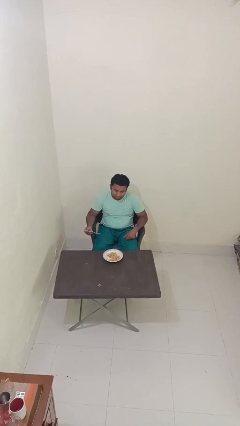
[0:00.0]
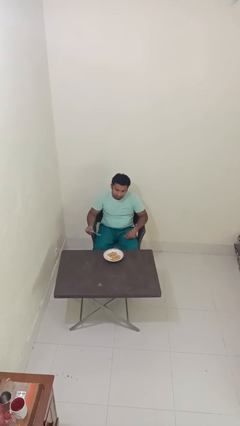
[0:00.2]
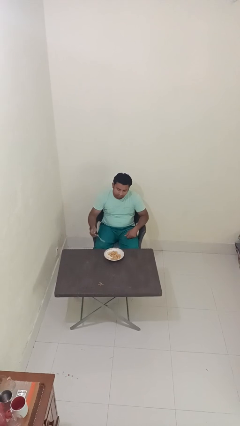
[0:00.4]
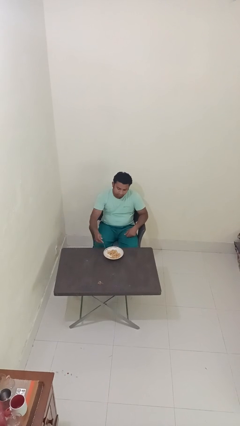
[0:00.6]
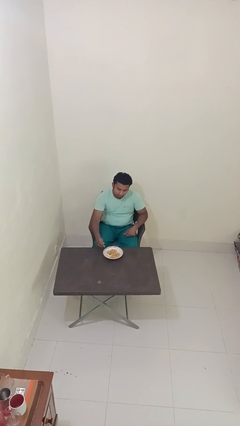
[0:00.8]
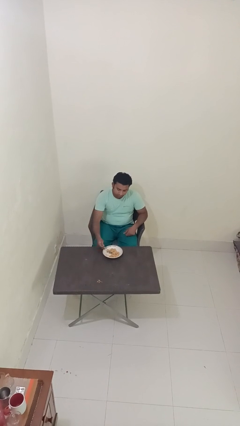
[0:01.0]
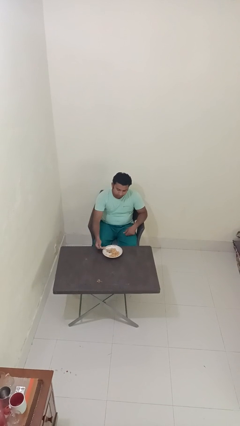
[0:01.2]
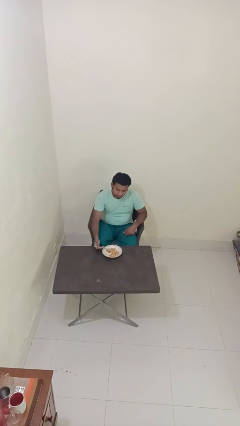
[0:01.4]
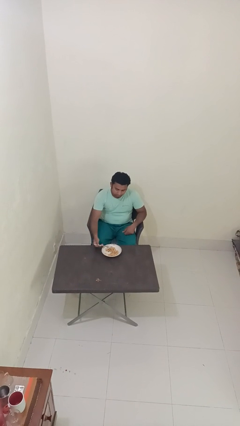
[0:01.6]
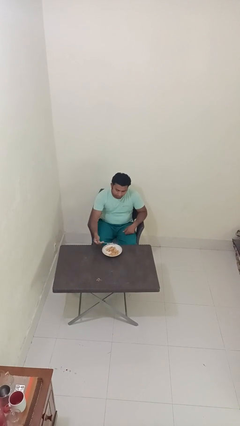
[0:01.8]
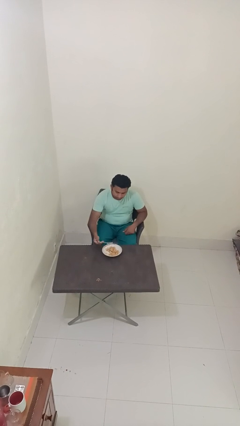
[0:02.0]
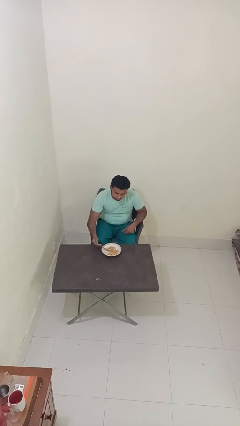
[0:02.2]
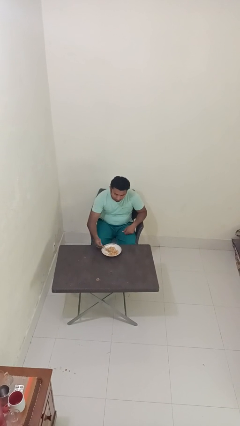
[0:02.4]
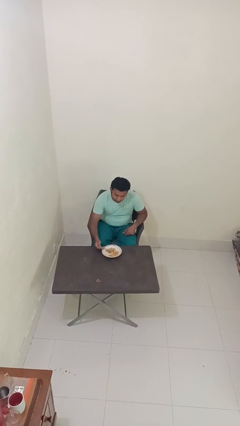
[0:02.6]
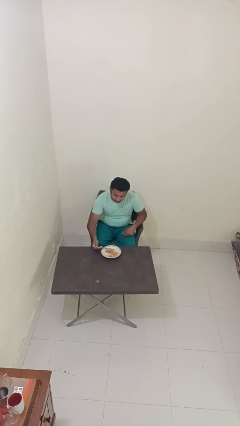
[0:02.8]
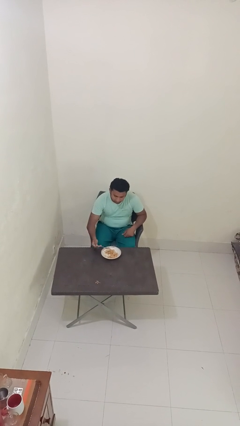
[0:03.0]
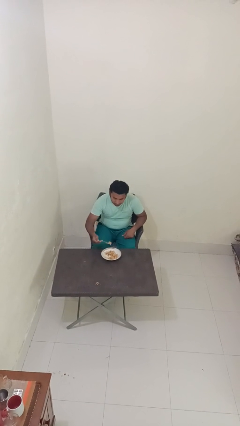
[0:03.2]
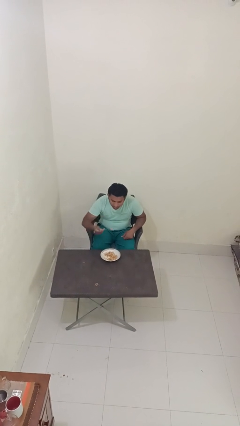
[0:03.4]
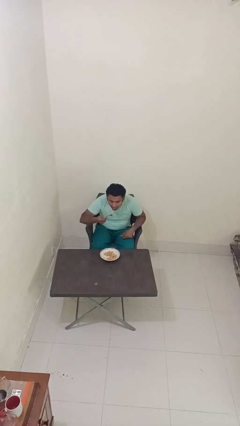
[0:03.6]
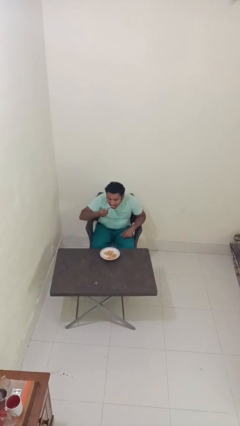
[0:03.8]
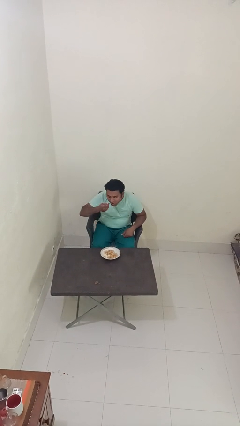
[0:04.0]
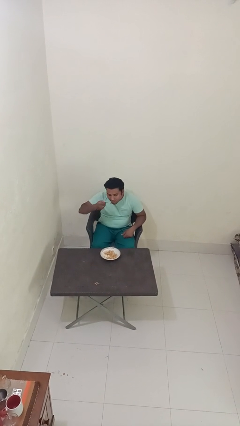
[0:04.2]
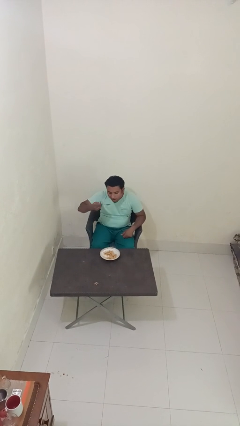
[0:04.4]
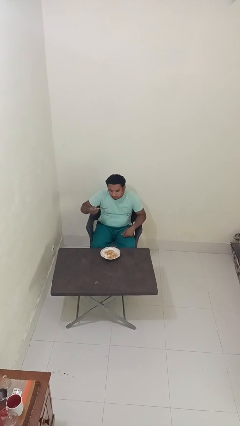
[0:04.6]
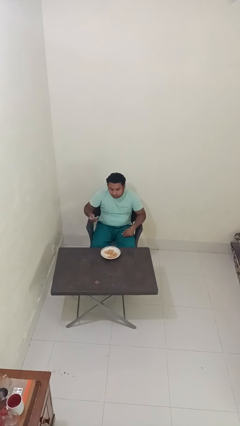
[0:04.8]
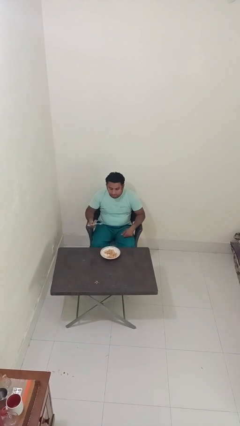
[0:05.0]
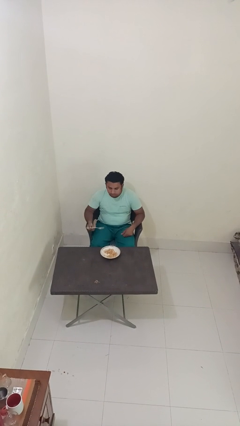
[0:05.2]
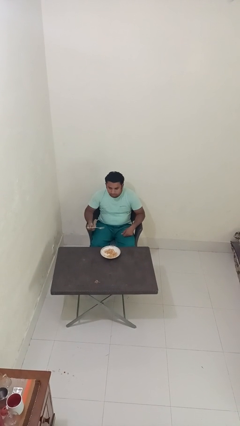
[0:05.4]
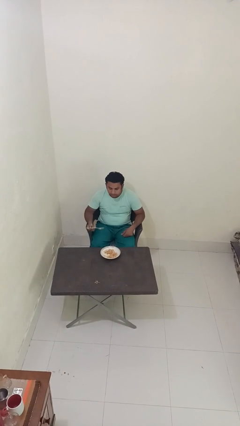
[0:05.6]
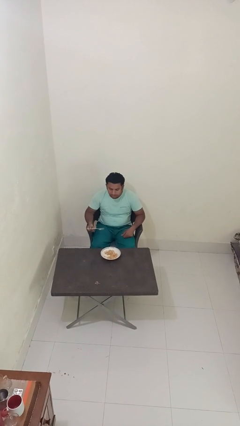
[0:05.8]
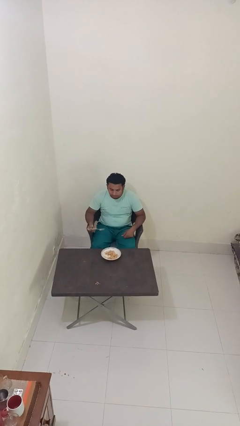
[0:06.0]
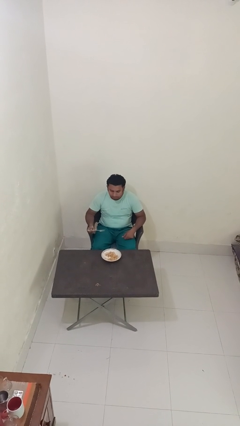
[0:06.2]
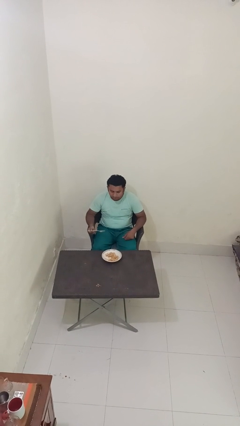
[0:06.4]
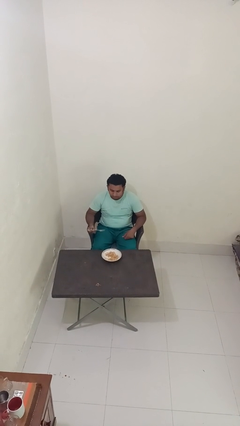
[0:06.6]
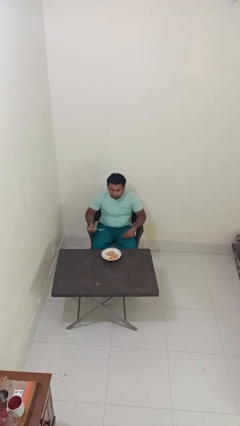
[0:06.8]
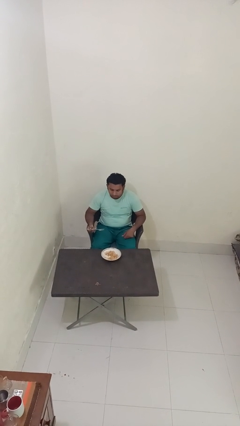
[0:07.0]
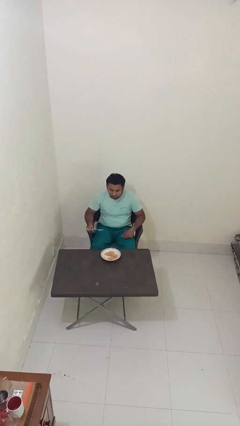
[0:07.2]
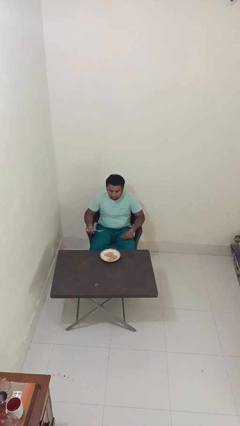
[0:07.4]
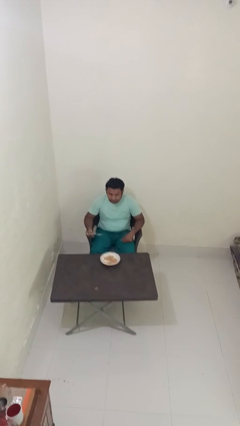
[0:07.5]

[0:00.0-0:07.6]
person eats with utensil

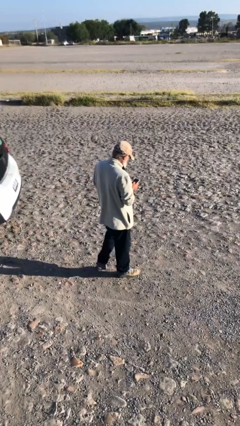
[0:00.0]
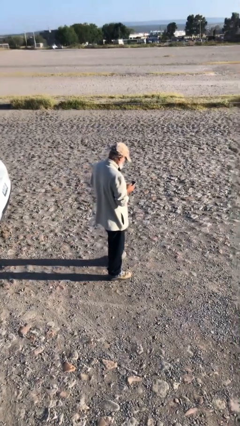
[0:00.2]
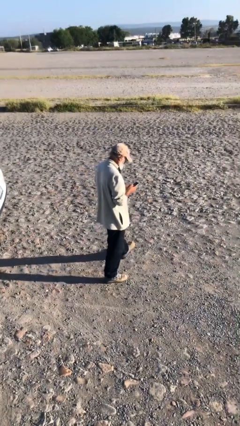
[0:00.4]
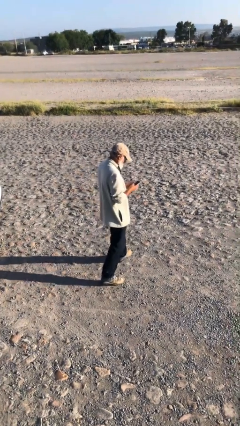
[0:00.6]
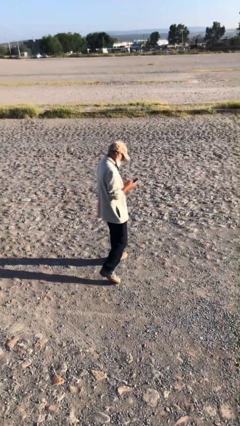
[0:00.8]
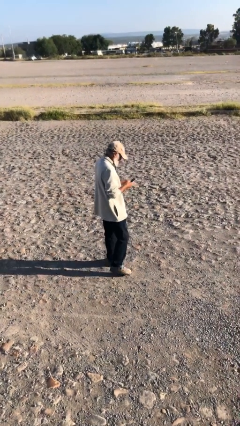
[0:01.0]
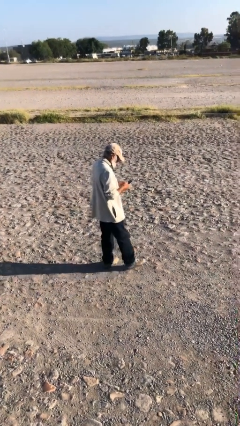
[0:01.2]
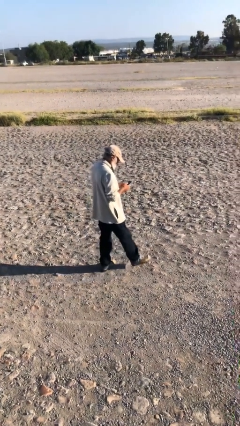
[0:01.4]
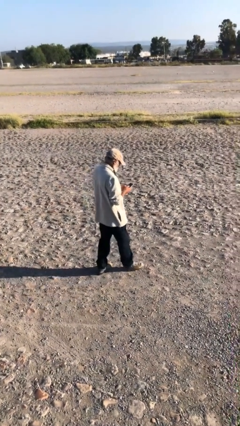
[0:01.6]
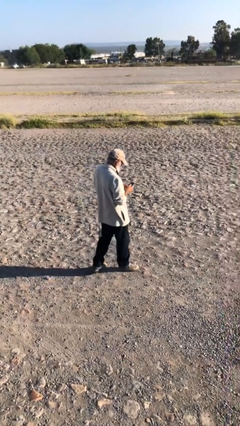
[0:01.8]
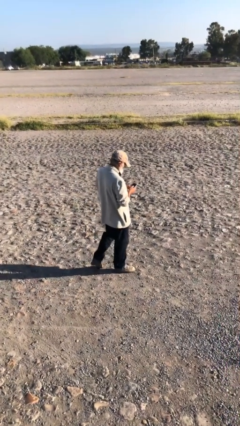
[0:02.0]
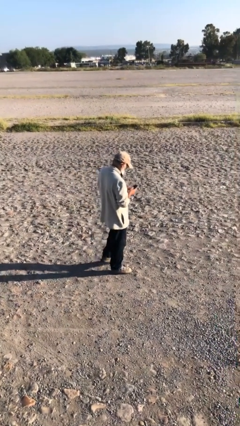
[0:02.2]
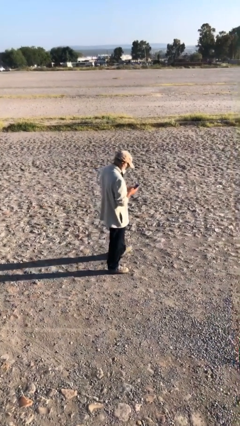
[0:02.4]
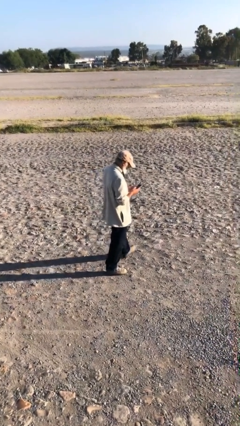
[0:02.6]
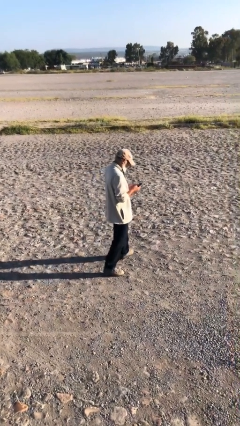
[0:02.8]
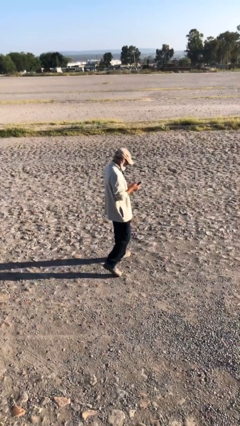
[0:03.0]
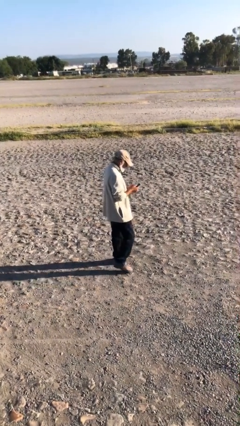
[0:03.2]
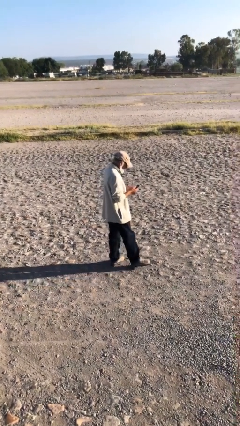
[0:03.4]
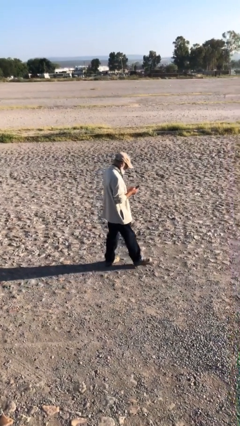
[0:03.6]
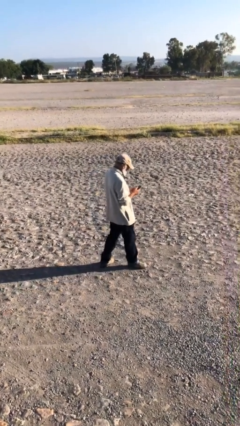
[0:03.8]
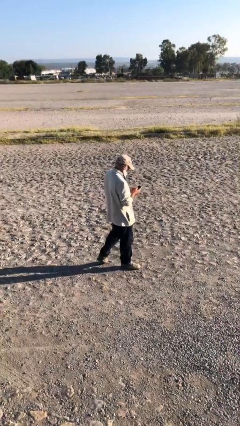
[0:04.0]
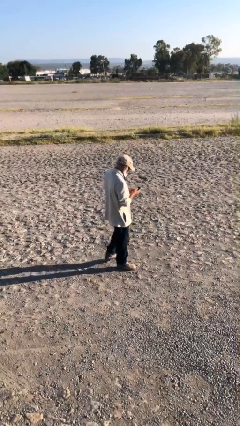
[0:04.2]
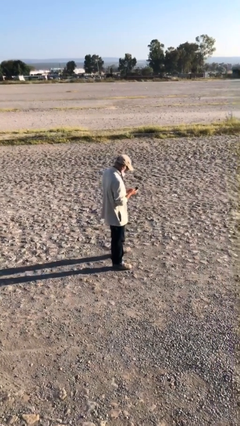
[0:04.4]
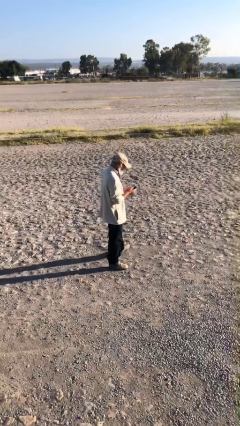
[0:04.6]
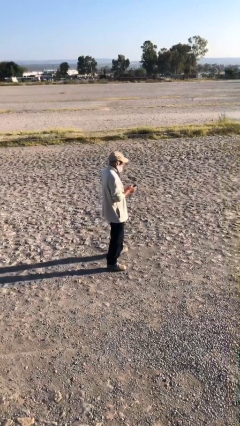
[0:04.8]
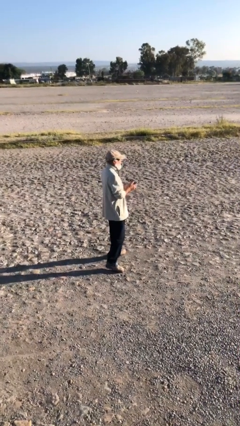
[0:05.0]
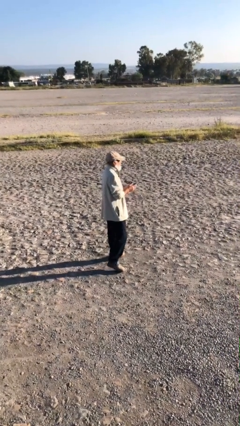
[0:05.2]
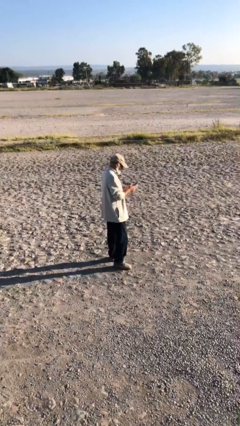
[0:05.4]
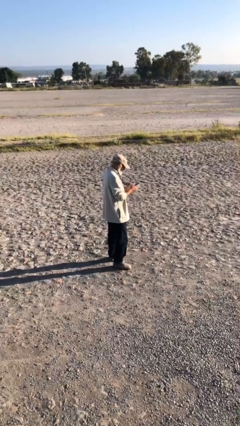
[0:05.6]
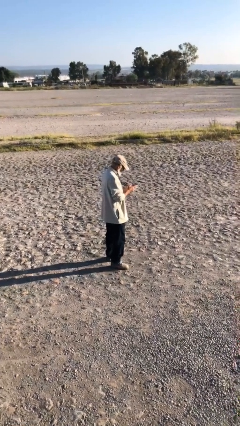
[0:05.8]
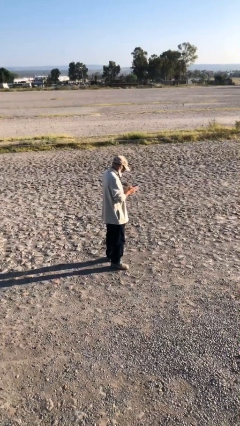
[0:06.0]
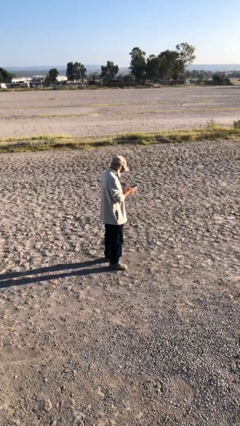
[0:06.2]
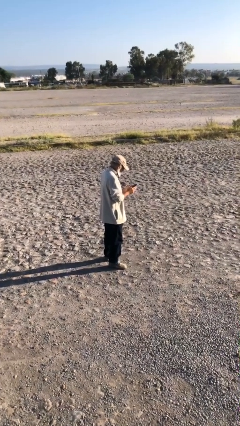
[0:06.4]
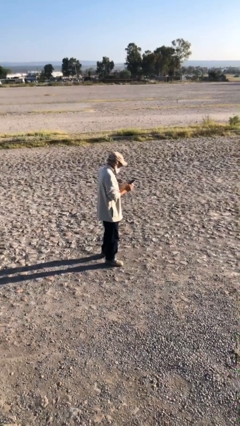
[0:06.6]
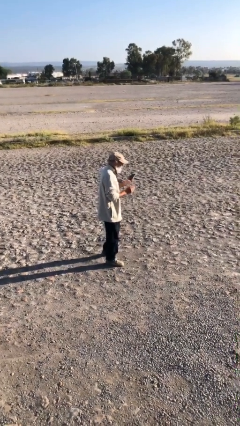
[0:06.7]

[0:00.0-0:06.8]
person texts on phone

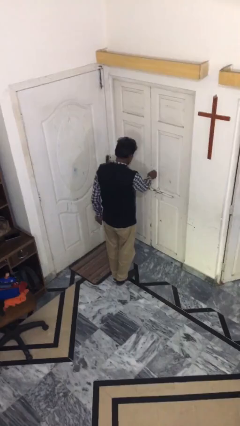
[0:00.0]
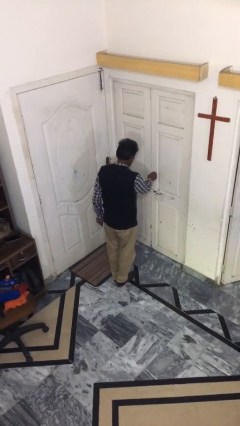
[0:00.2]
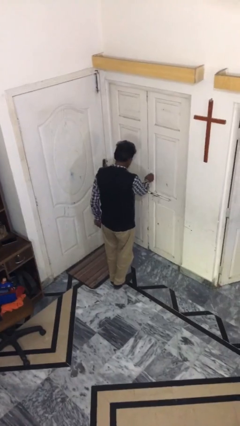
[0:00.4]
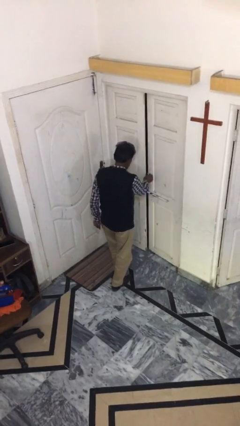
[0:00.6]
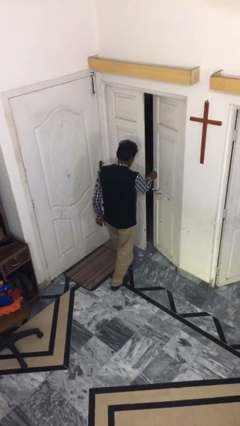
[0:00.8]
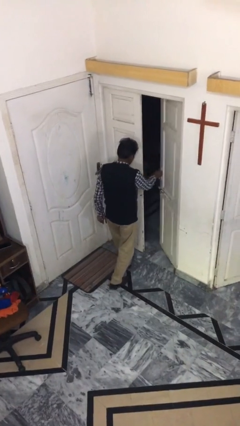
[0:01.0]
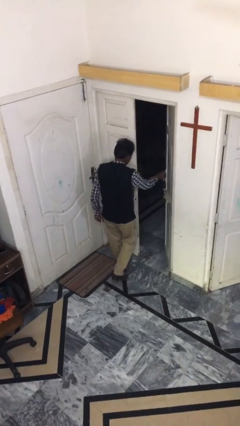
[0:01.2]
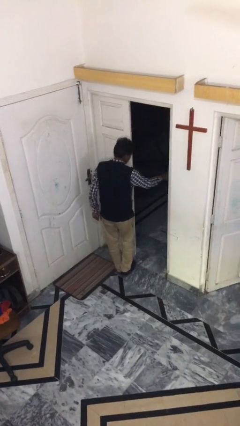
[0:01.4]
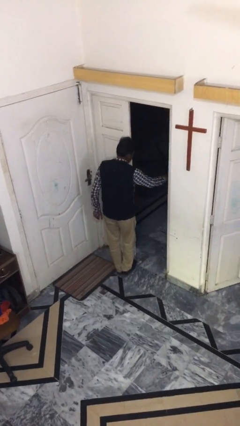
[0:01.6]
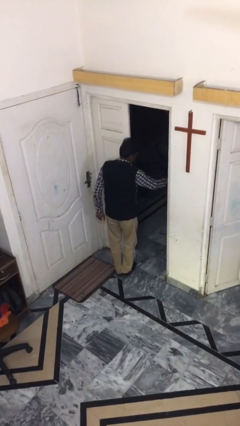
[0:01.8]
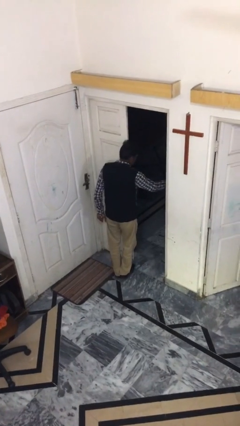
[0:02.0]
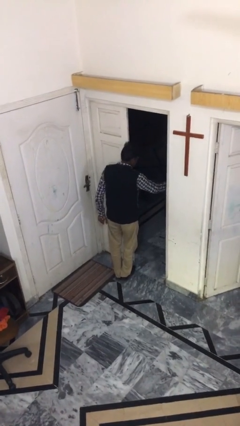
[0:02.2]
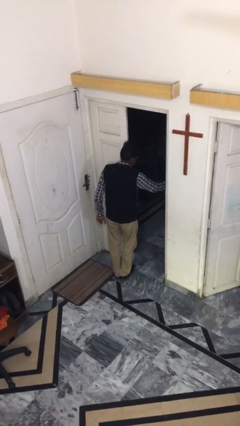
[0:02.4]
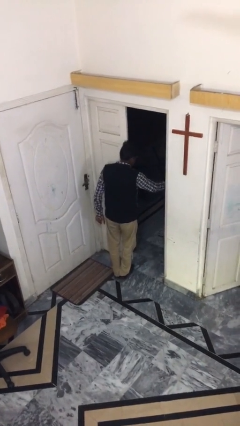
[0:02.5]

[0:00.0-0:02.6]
person opens facility door

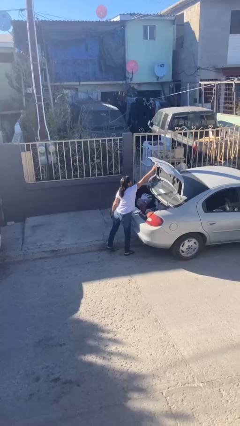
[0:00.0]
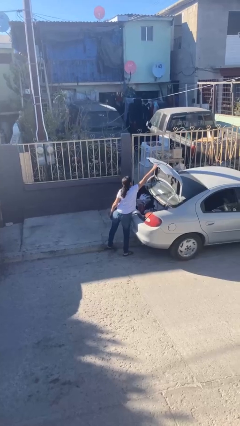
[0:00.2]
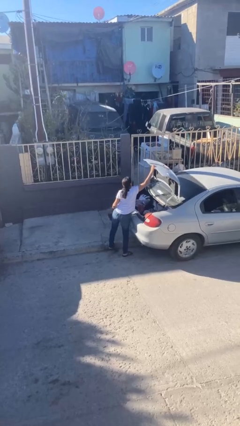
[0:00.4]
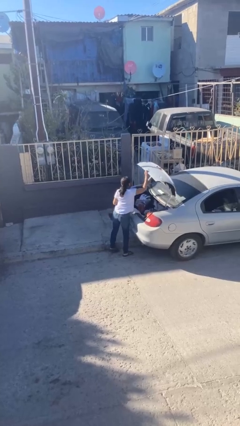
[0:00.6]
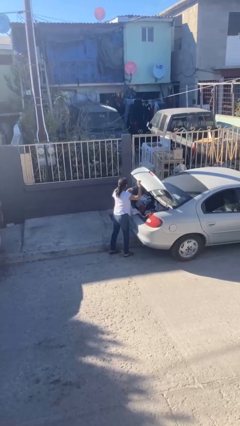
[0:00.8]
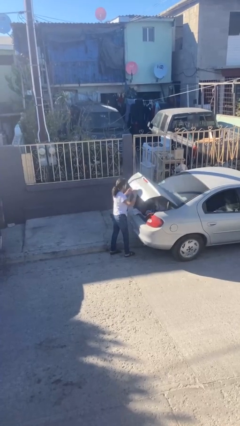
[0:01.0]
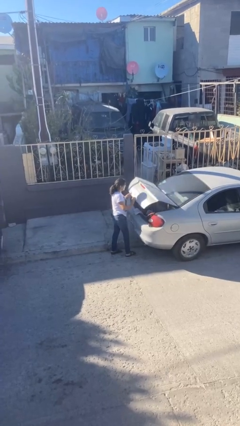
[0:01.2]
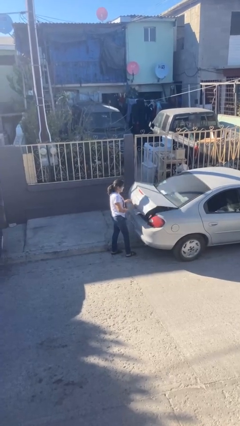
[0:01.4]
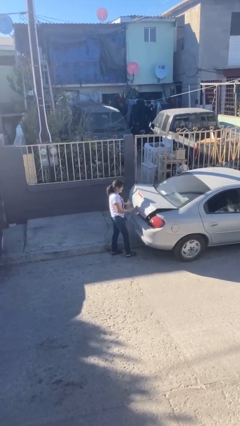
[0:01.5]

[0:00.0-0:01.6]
person closes car trunk
